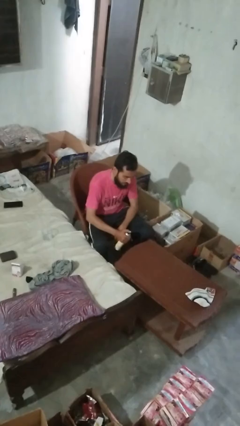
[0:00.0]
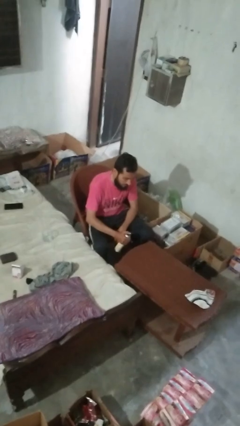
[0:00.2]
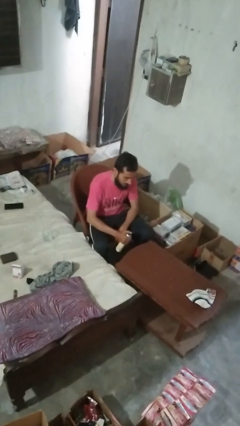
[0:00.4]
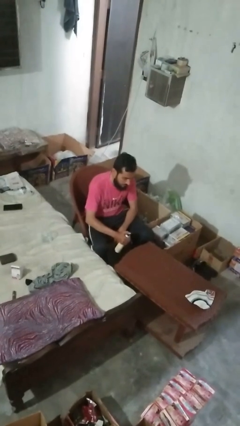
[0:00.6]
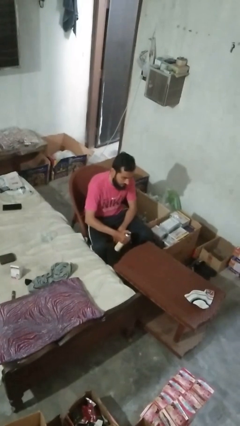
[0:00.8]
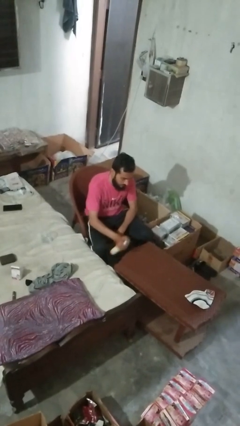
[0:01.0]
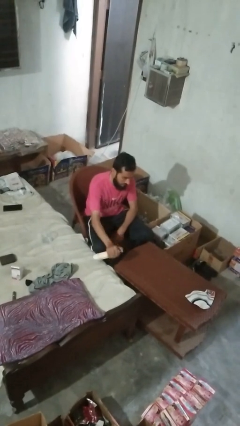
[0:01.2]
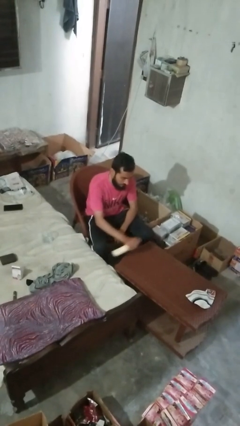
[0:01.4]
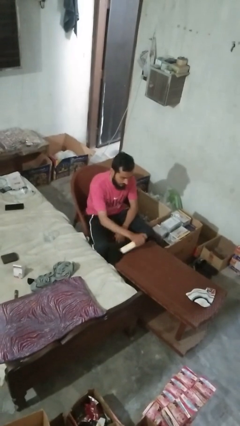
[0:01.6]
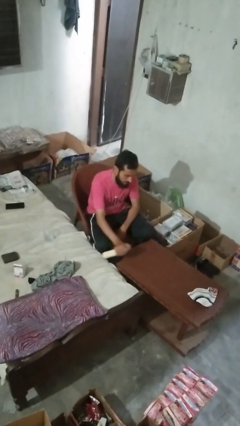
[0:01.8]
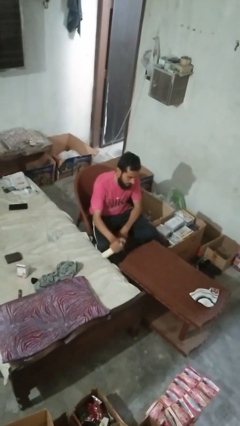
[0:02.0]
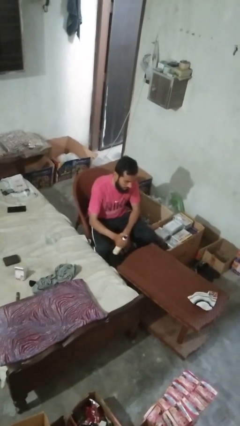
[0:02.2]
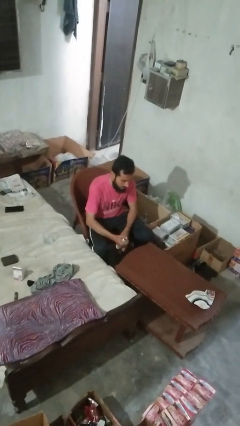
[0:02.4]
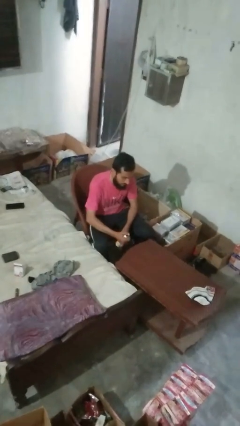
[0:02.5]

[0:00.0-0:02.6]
person sprays from bottle

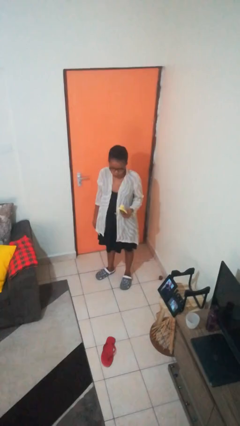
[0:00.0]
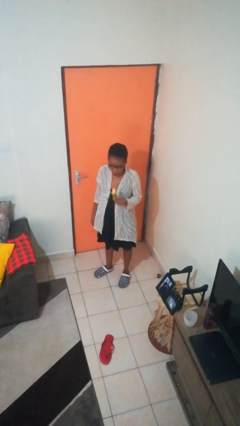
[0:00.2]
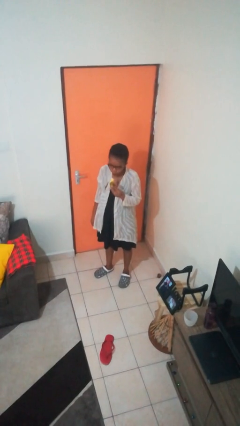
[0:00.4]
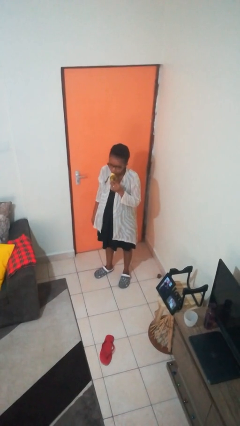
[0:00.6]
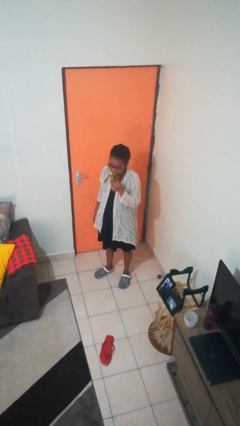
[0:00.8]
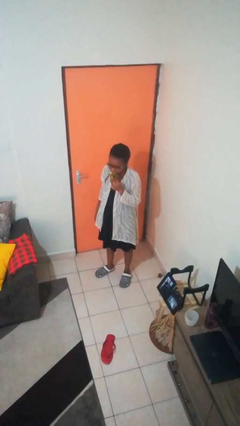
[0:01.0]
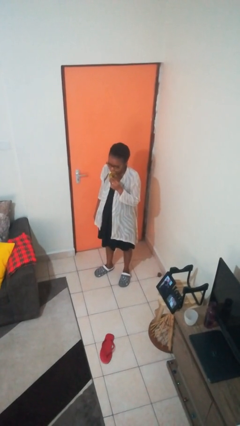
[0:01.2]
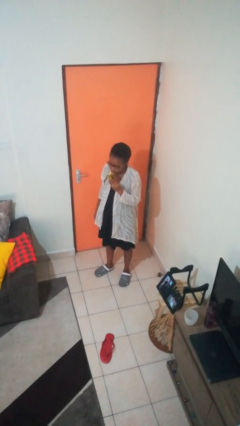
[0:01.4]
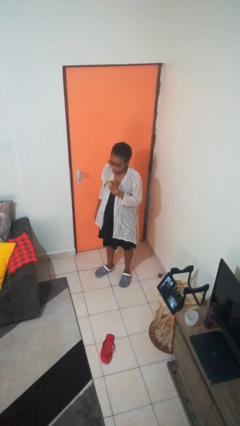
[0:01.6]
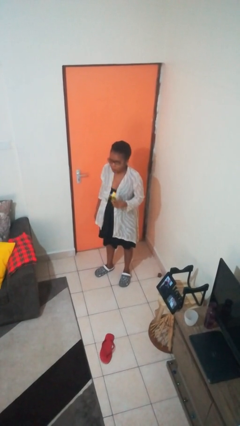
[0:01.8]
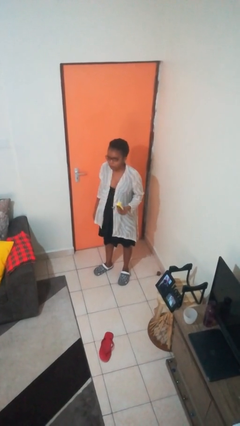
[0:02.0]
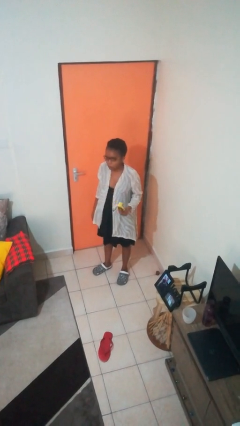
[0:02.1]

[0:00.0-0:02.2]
person eats banana

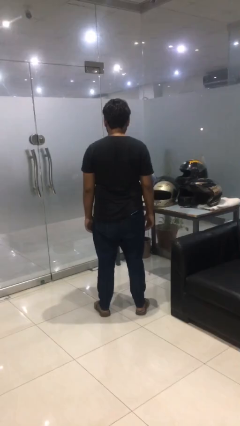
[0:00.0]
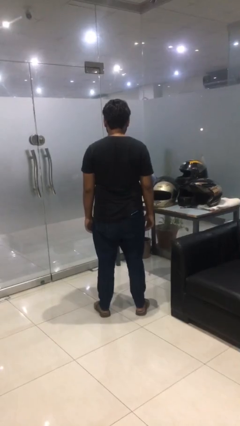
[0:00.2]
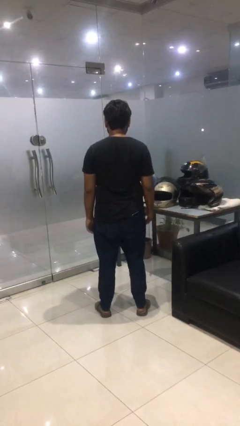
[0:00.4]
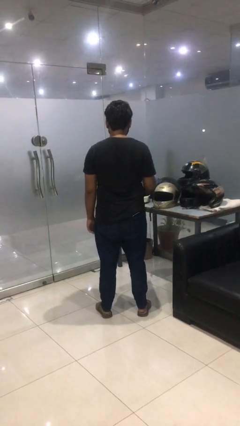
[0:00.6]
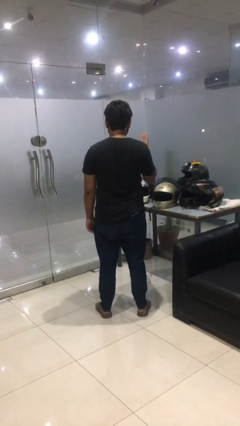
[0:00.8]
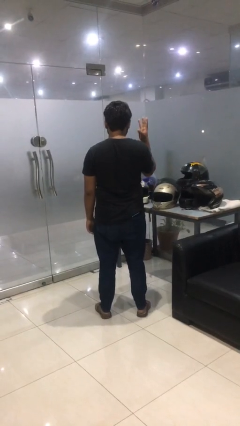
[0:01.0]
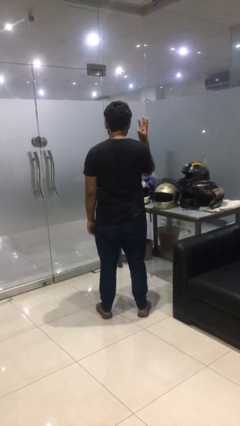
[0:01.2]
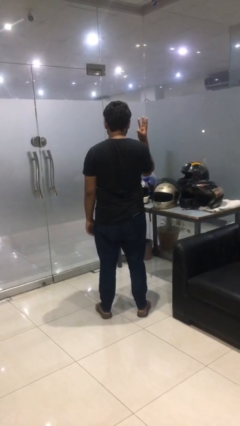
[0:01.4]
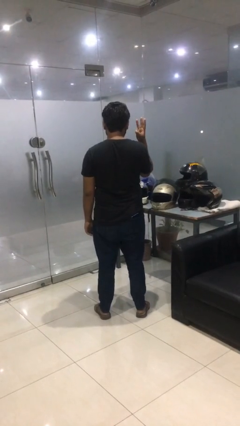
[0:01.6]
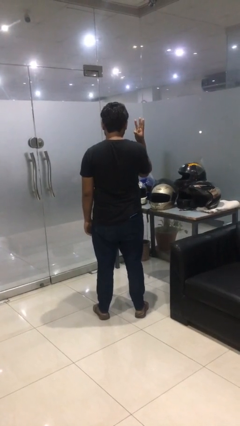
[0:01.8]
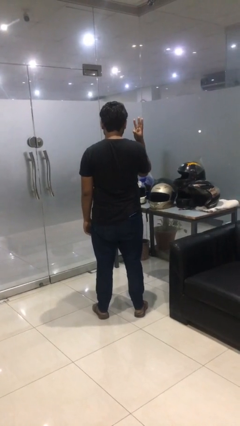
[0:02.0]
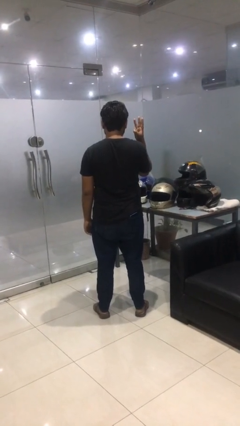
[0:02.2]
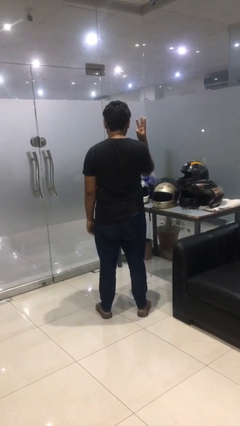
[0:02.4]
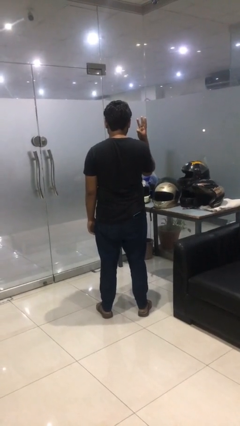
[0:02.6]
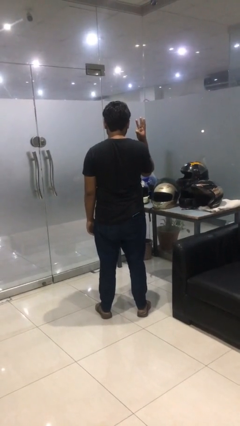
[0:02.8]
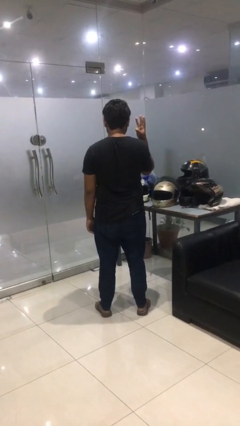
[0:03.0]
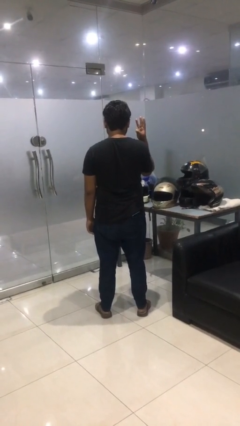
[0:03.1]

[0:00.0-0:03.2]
person gestures number three

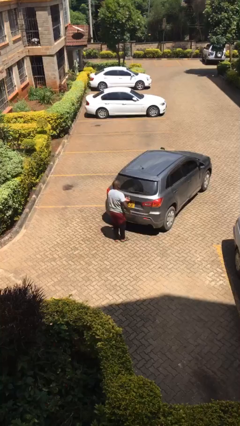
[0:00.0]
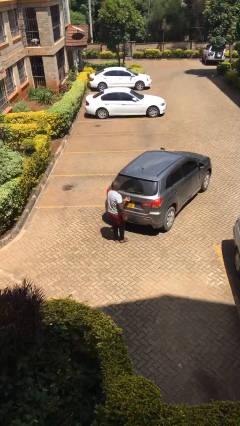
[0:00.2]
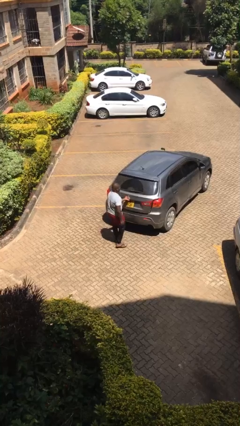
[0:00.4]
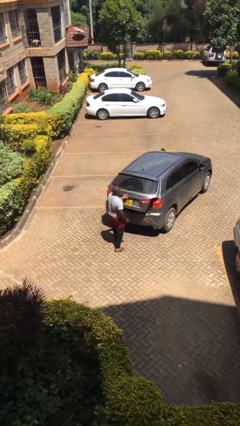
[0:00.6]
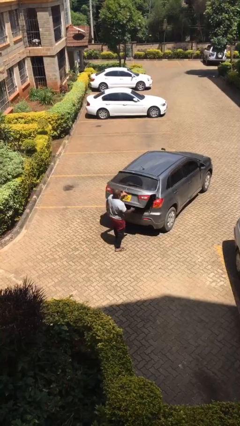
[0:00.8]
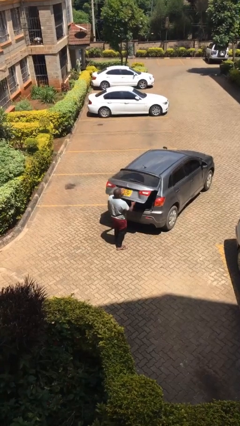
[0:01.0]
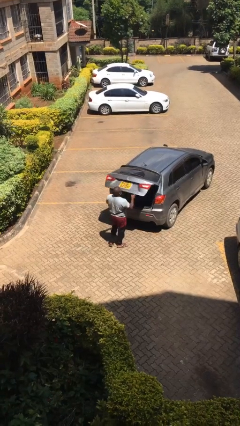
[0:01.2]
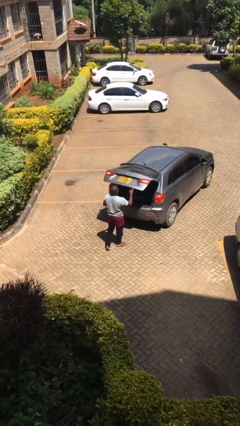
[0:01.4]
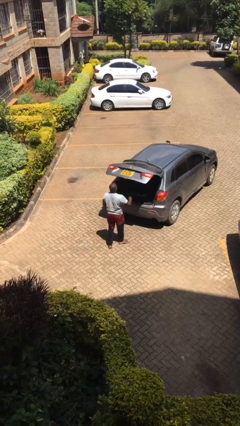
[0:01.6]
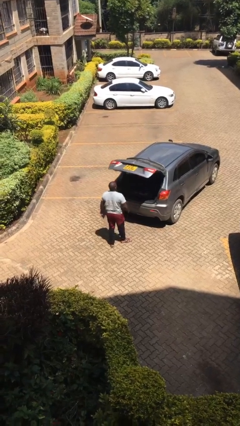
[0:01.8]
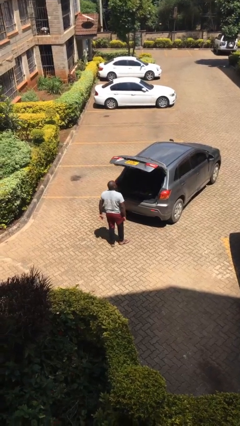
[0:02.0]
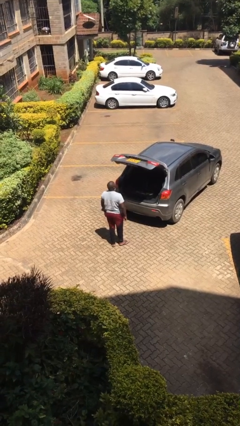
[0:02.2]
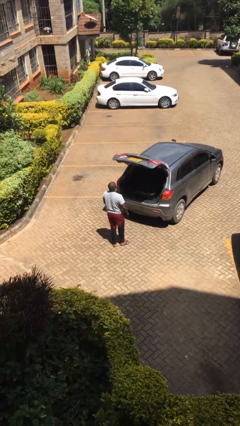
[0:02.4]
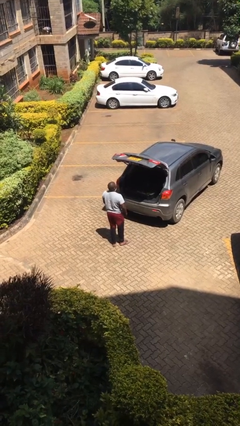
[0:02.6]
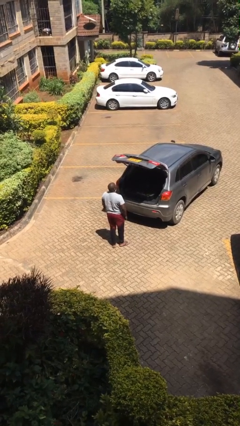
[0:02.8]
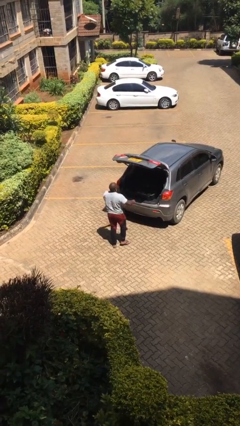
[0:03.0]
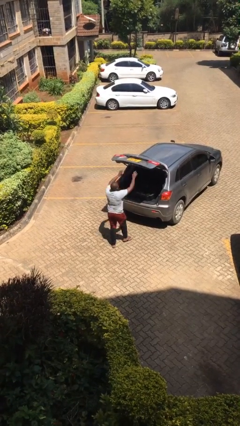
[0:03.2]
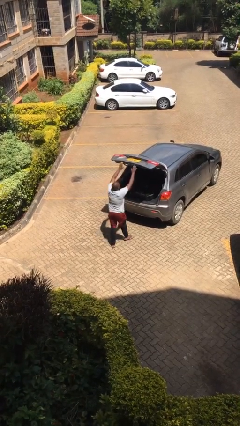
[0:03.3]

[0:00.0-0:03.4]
person opens car trunk

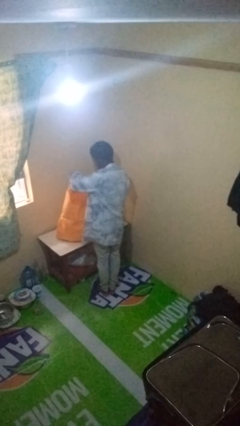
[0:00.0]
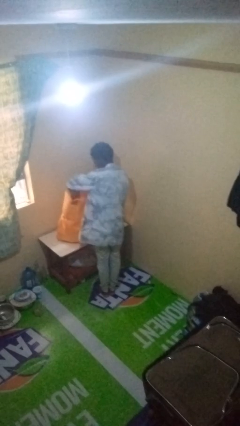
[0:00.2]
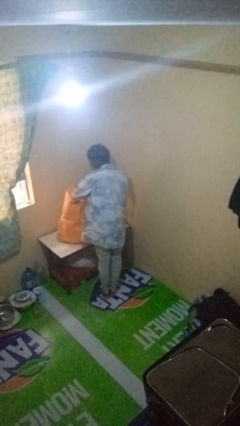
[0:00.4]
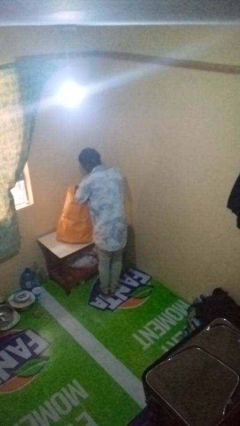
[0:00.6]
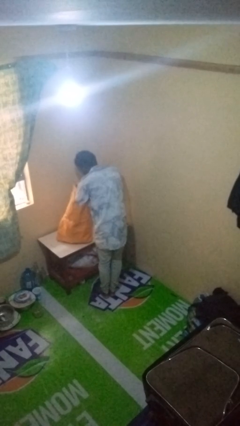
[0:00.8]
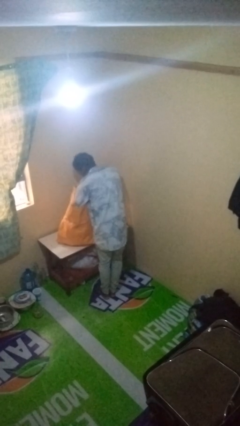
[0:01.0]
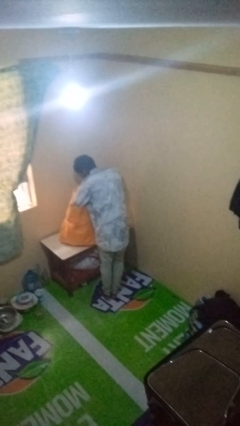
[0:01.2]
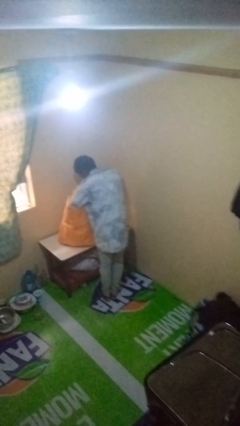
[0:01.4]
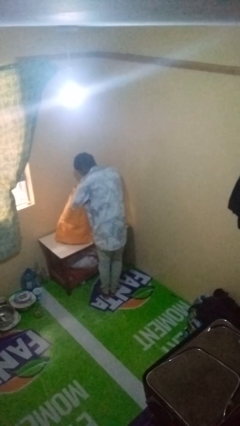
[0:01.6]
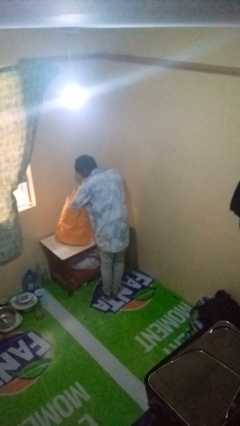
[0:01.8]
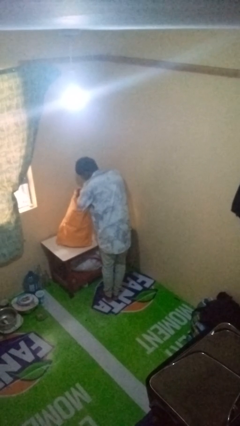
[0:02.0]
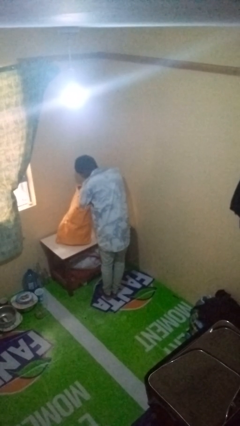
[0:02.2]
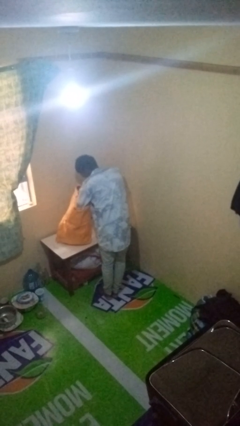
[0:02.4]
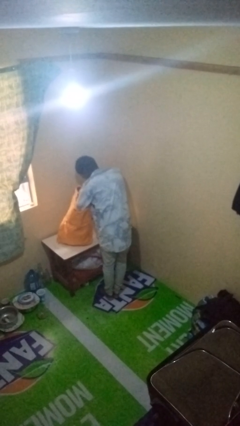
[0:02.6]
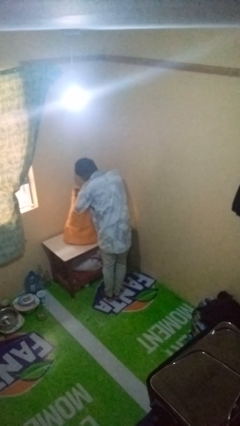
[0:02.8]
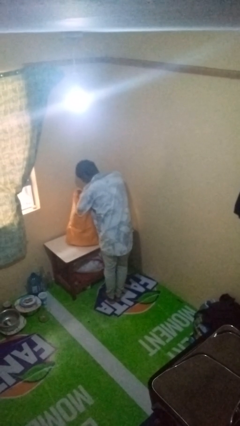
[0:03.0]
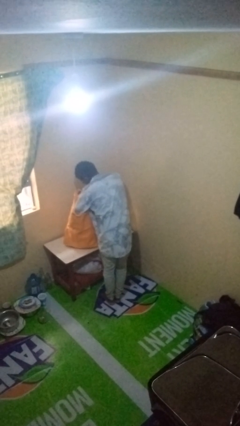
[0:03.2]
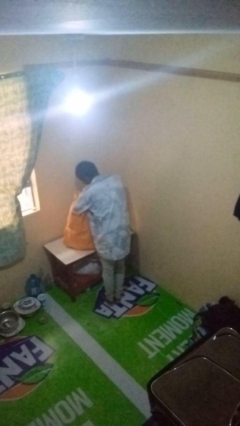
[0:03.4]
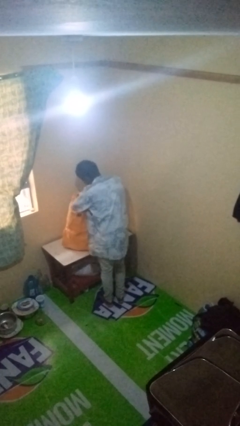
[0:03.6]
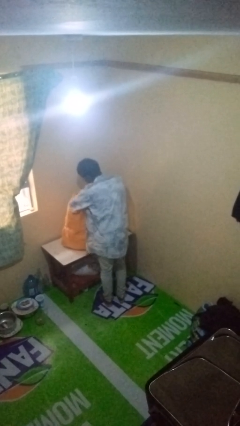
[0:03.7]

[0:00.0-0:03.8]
person searches in bag

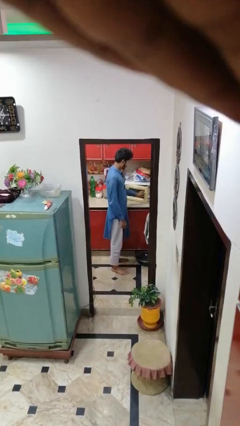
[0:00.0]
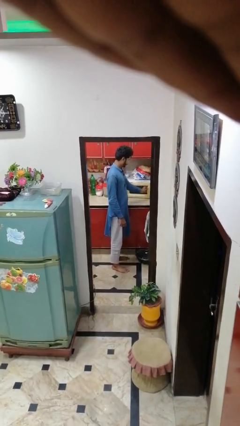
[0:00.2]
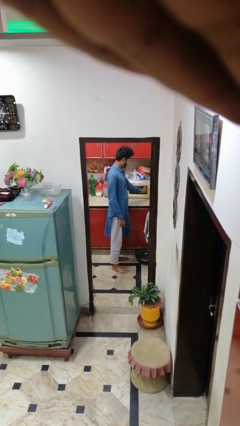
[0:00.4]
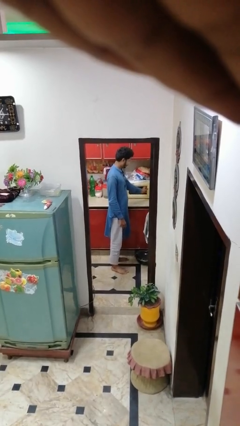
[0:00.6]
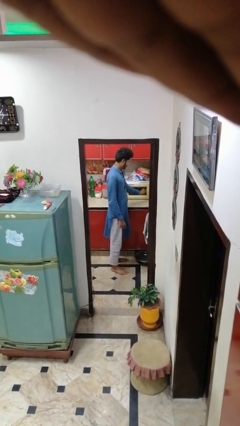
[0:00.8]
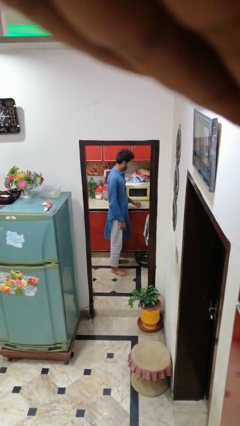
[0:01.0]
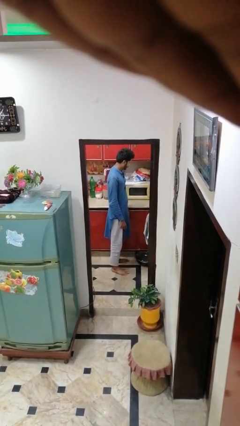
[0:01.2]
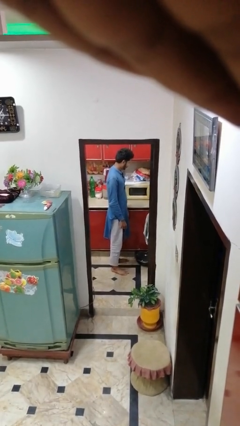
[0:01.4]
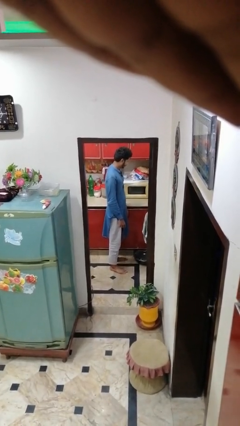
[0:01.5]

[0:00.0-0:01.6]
person closes microwave

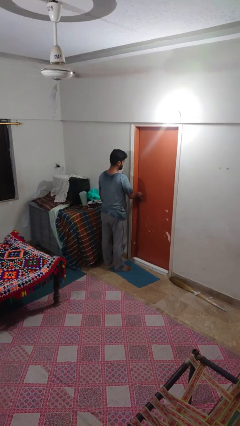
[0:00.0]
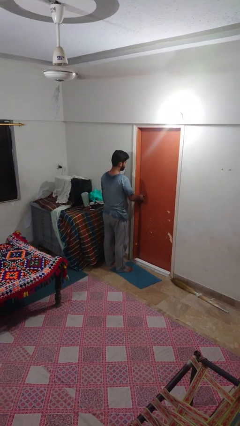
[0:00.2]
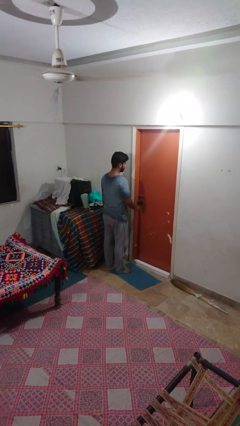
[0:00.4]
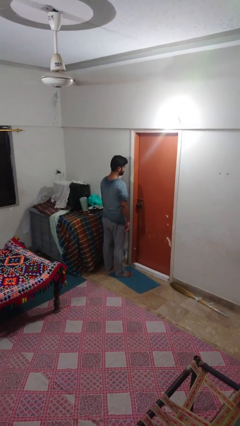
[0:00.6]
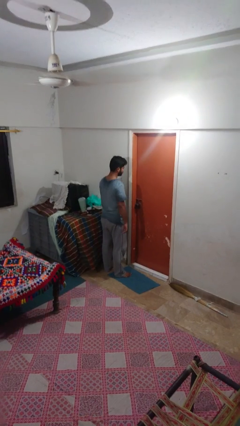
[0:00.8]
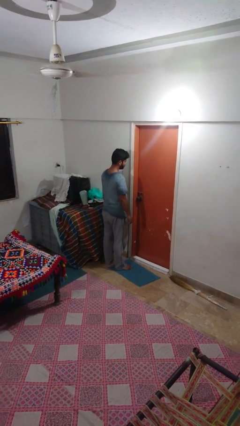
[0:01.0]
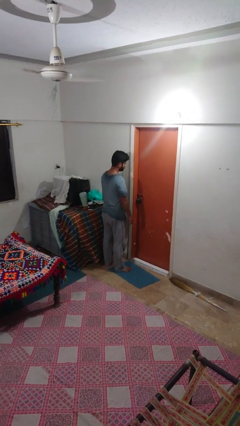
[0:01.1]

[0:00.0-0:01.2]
person locks door with keys
